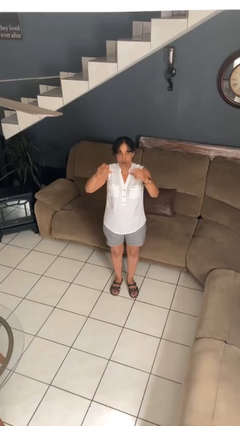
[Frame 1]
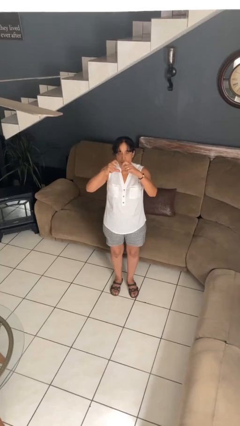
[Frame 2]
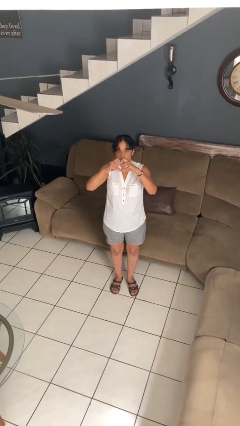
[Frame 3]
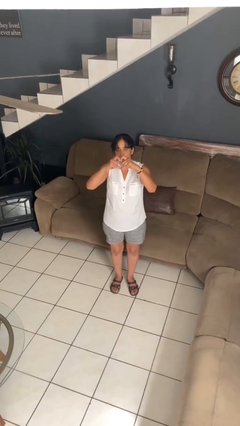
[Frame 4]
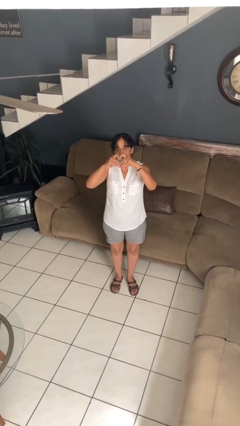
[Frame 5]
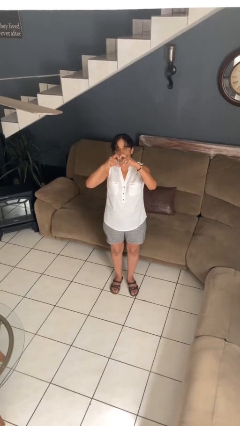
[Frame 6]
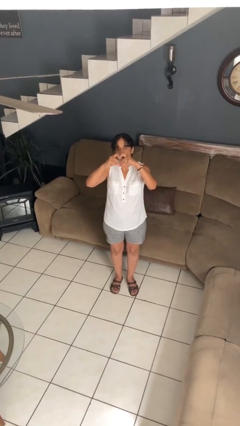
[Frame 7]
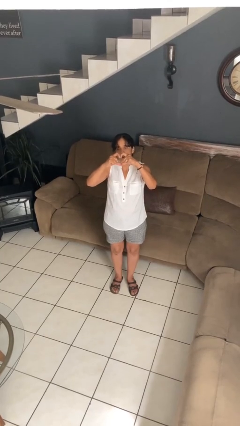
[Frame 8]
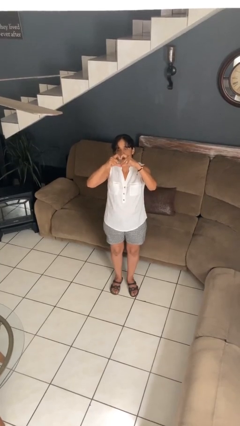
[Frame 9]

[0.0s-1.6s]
person gestures heart

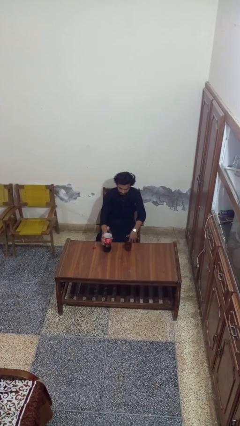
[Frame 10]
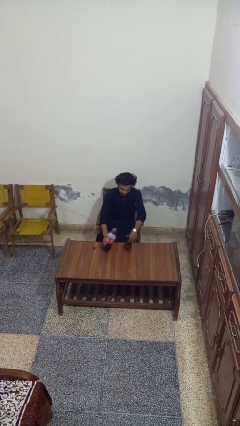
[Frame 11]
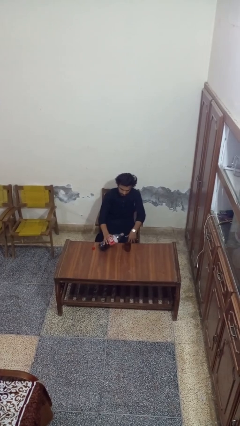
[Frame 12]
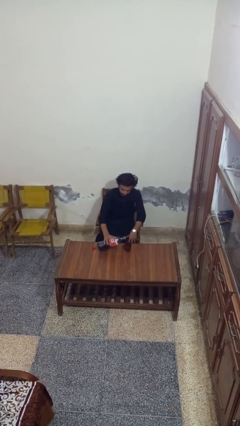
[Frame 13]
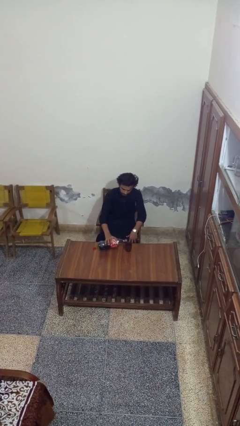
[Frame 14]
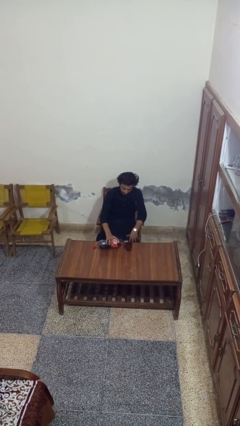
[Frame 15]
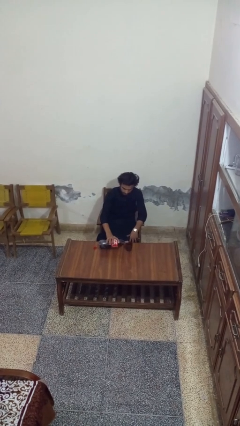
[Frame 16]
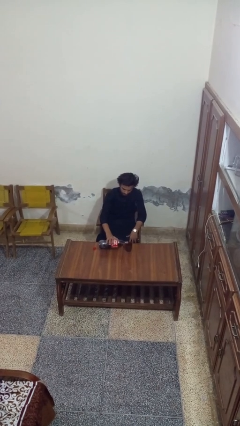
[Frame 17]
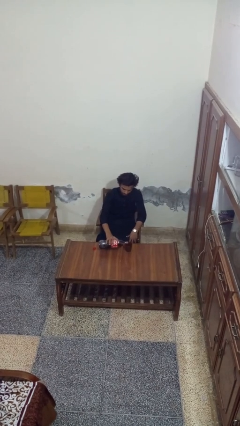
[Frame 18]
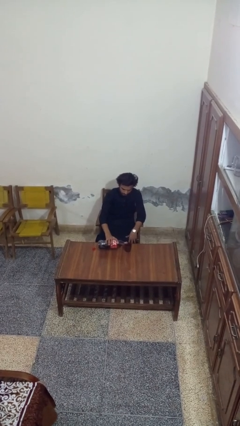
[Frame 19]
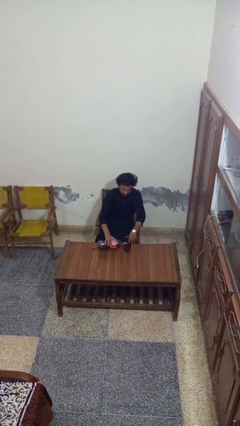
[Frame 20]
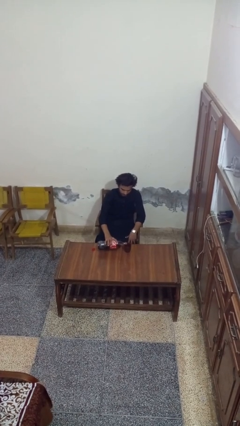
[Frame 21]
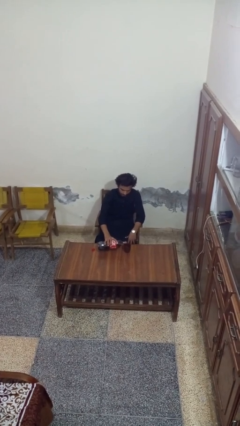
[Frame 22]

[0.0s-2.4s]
person pours liquid into cup

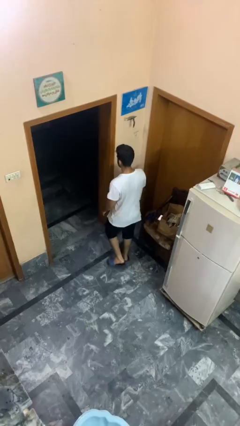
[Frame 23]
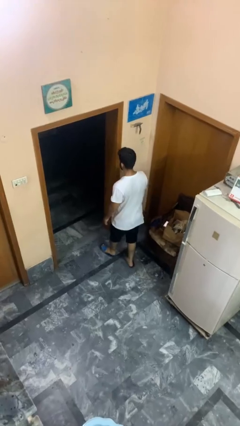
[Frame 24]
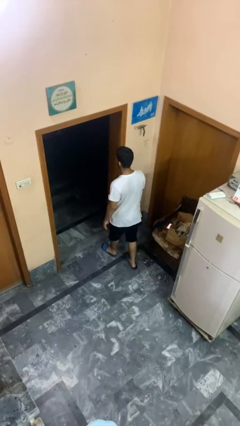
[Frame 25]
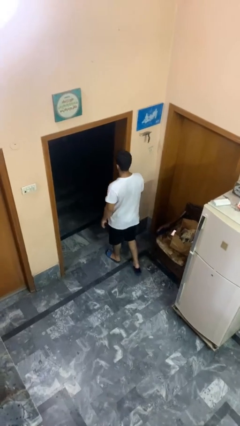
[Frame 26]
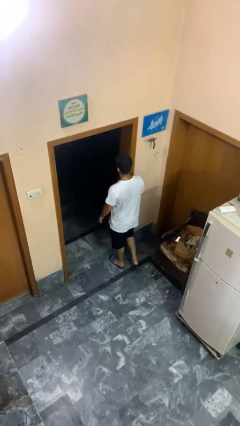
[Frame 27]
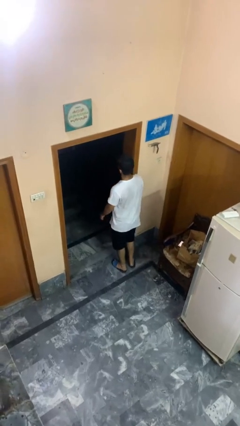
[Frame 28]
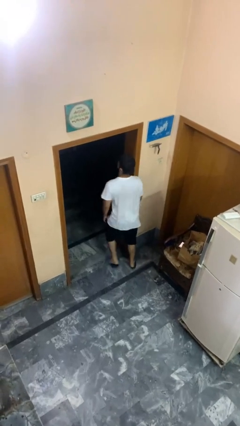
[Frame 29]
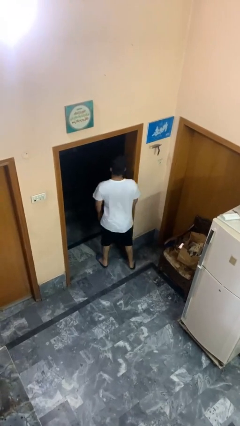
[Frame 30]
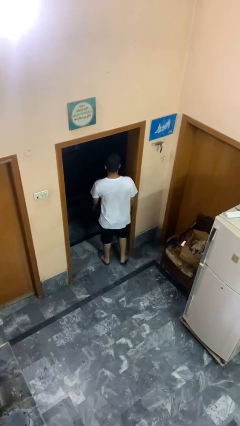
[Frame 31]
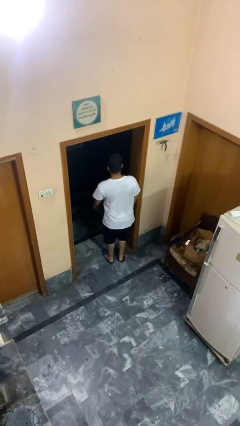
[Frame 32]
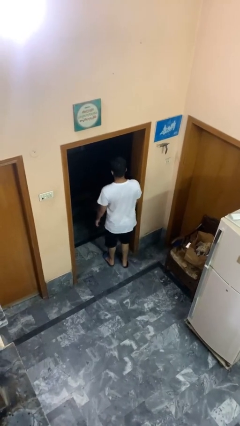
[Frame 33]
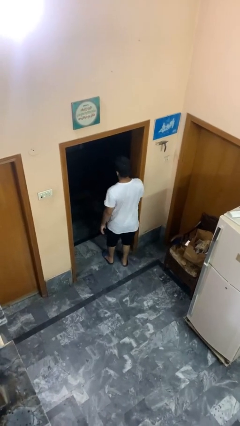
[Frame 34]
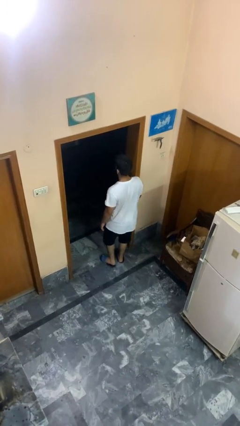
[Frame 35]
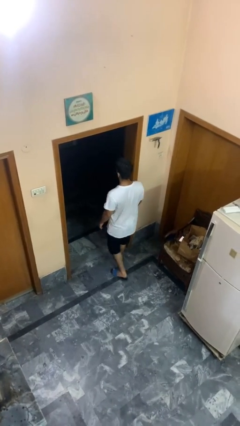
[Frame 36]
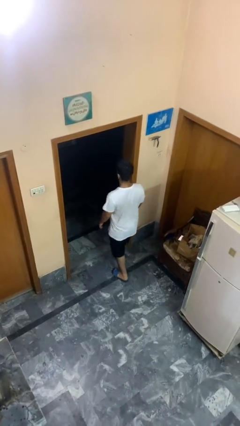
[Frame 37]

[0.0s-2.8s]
person bumps into wall

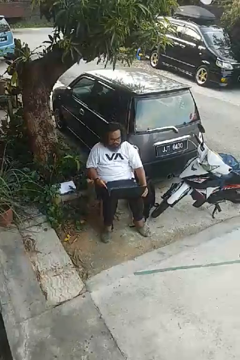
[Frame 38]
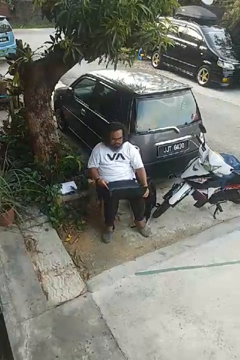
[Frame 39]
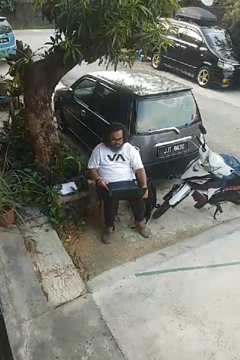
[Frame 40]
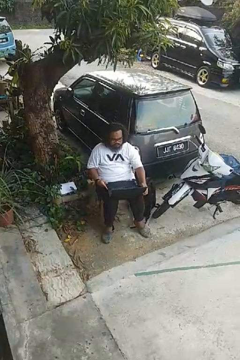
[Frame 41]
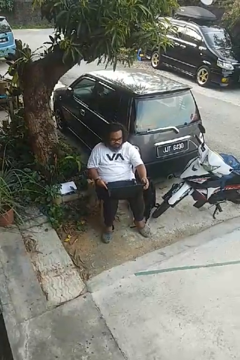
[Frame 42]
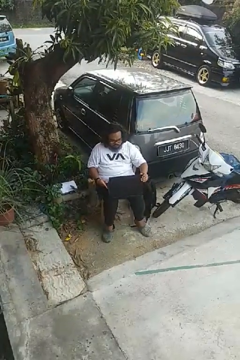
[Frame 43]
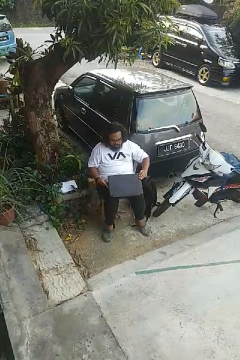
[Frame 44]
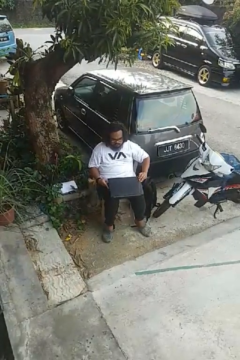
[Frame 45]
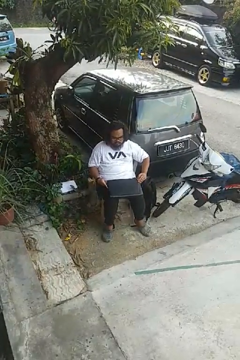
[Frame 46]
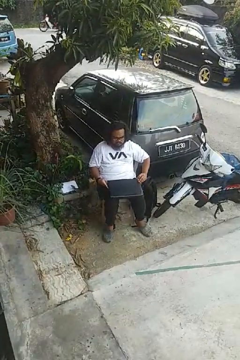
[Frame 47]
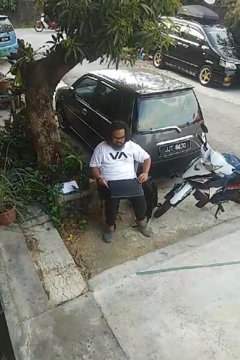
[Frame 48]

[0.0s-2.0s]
person closes laptop

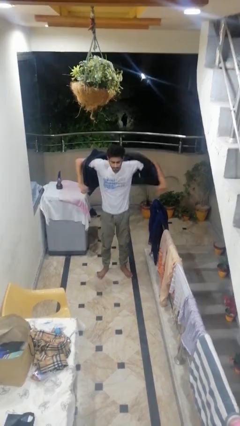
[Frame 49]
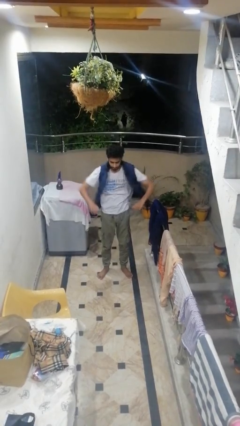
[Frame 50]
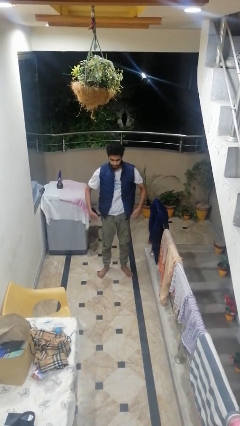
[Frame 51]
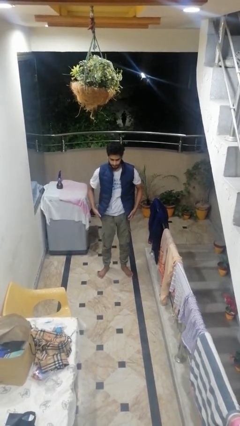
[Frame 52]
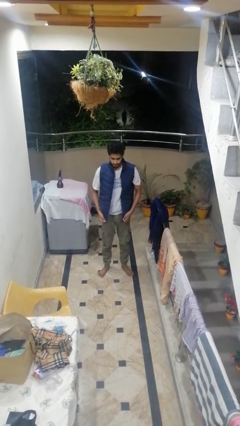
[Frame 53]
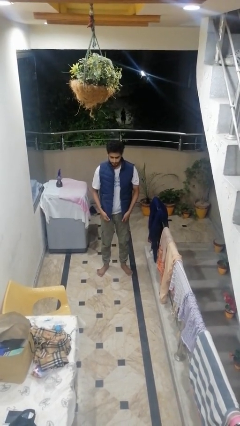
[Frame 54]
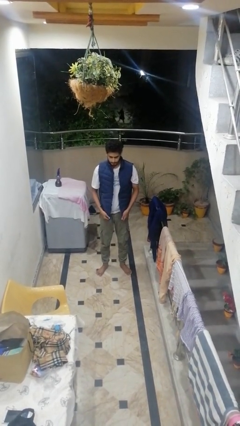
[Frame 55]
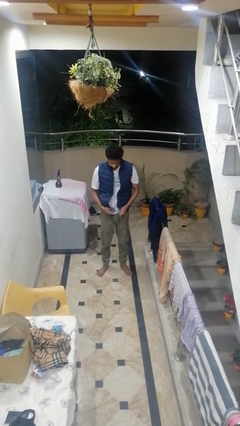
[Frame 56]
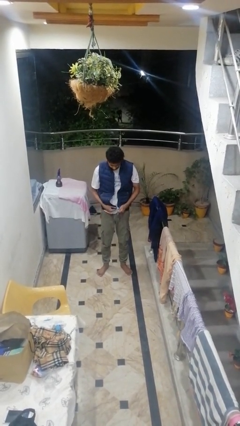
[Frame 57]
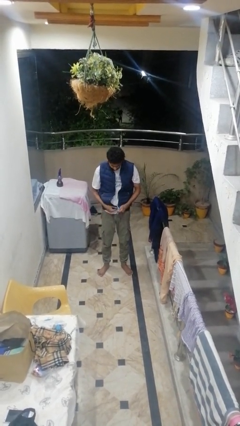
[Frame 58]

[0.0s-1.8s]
person puts on jacket

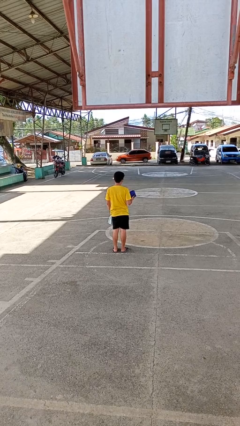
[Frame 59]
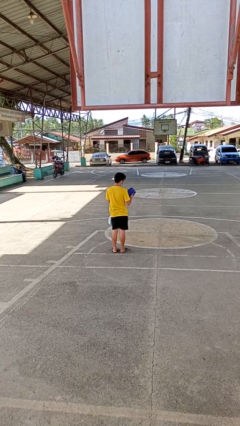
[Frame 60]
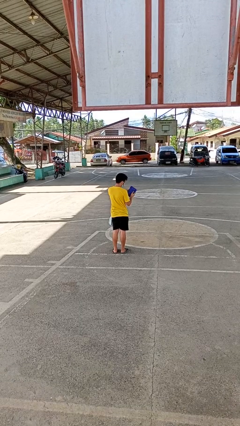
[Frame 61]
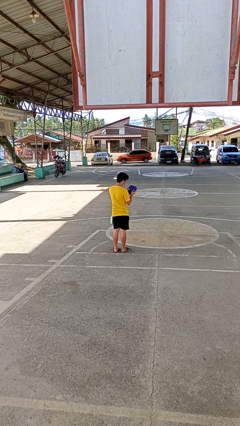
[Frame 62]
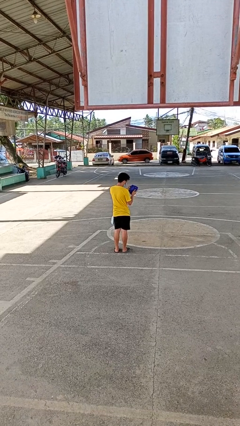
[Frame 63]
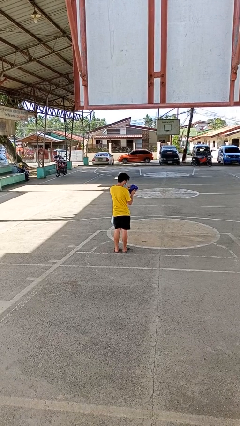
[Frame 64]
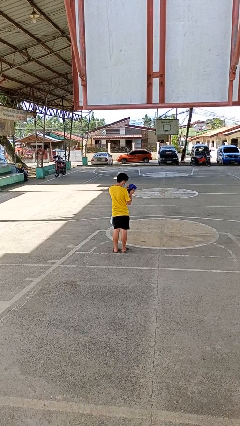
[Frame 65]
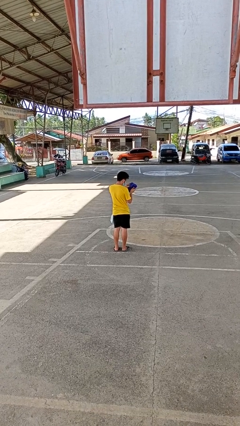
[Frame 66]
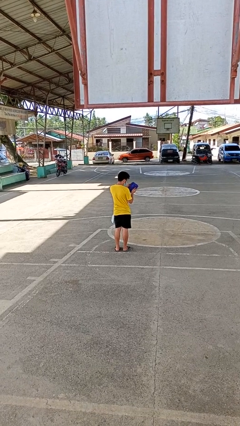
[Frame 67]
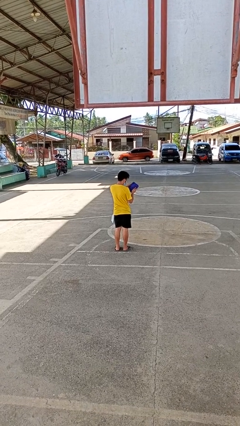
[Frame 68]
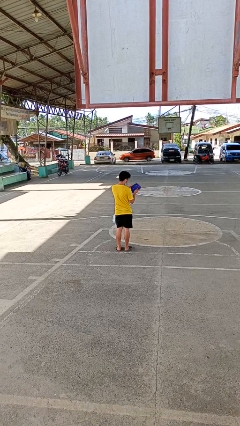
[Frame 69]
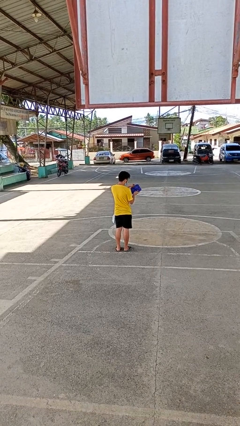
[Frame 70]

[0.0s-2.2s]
person searches in purse

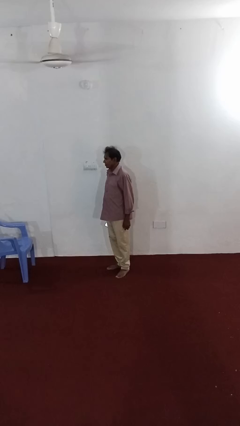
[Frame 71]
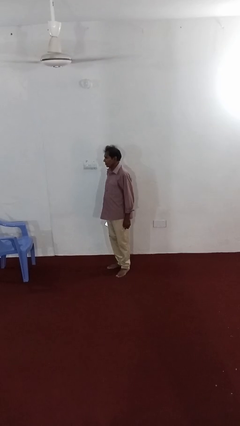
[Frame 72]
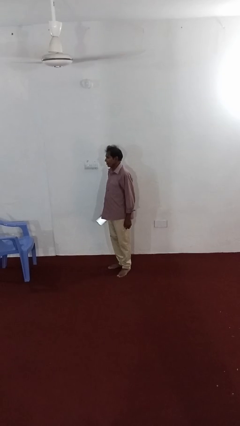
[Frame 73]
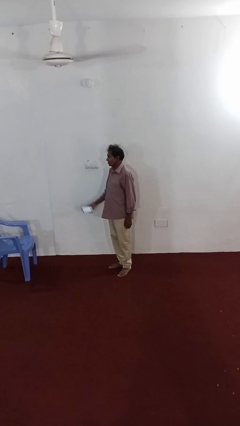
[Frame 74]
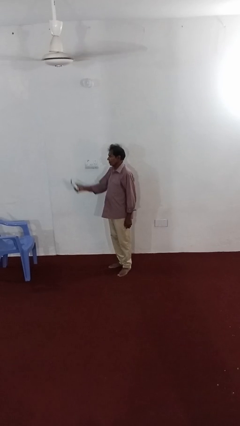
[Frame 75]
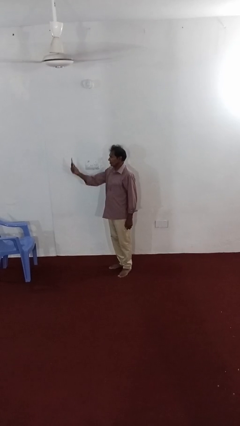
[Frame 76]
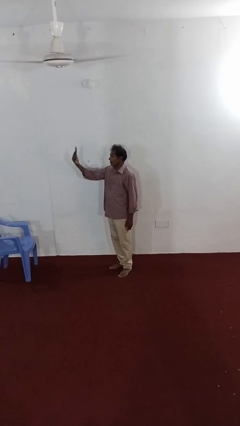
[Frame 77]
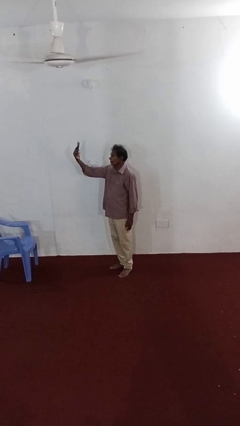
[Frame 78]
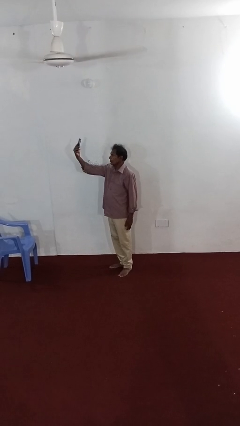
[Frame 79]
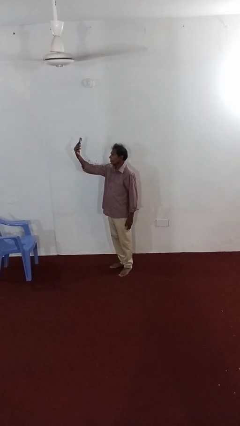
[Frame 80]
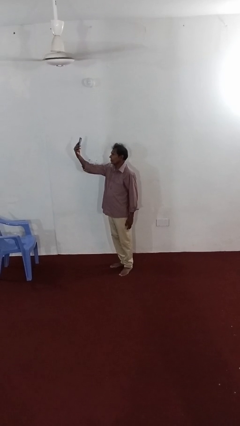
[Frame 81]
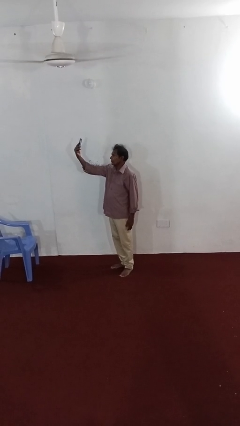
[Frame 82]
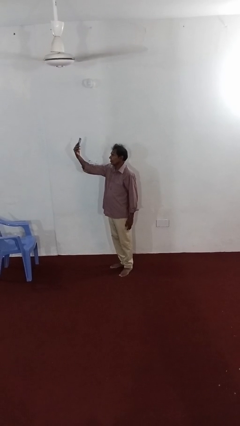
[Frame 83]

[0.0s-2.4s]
person takes selfie

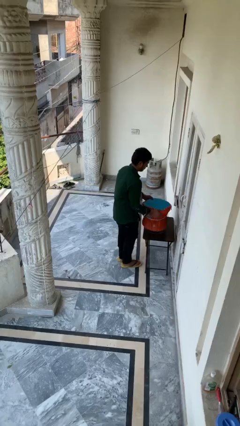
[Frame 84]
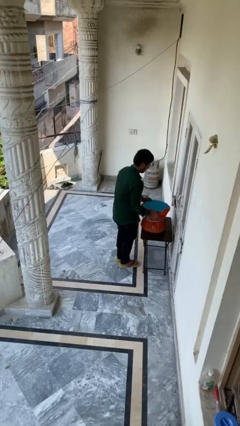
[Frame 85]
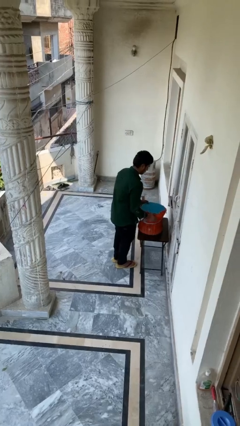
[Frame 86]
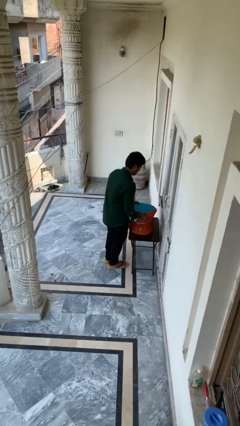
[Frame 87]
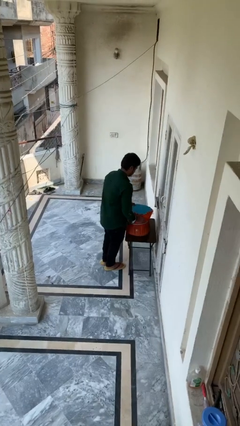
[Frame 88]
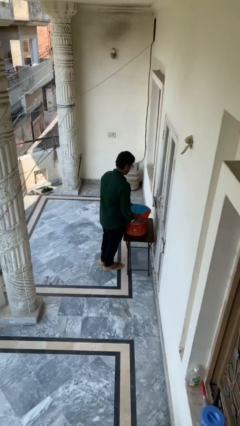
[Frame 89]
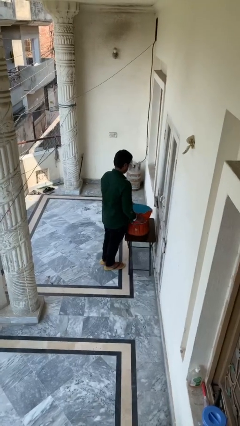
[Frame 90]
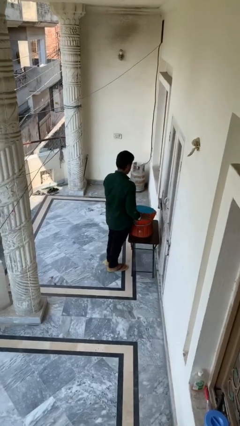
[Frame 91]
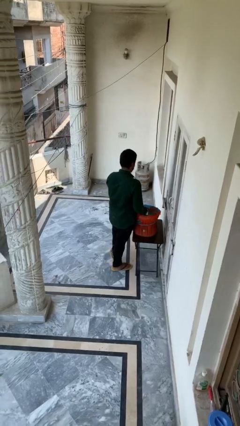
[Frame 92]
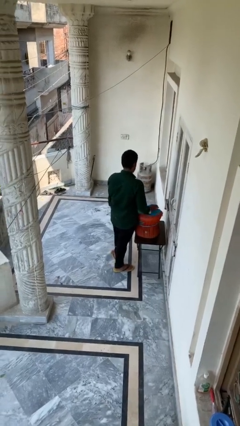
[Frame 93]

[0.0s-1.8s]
person puts down object on table
